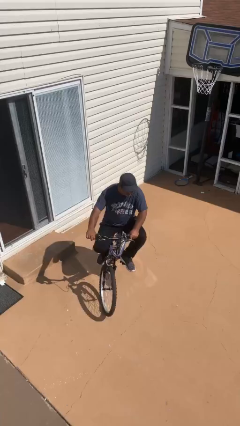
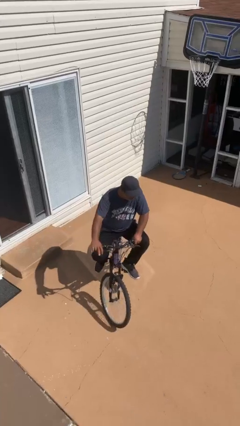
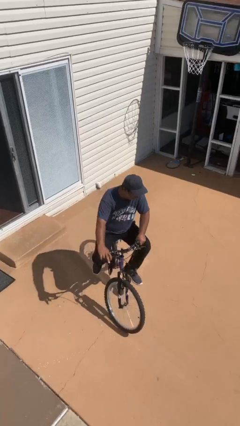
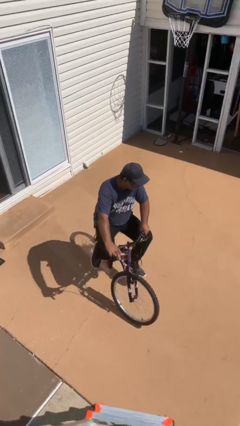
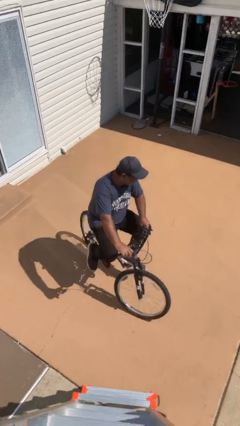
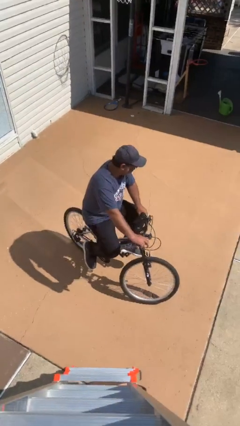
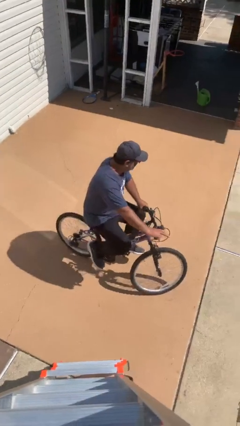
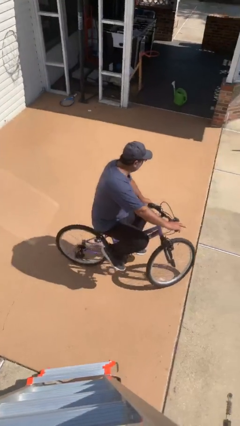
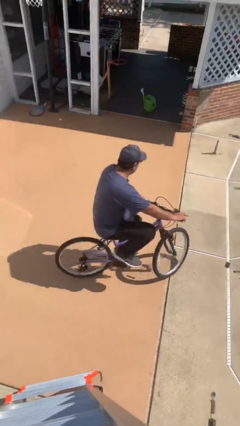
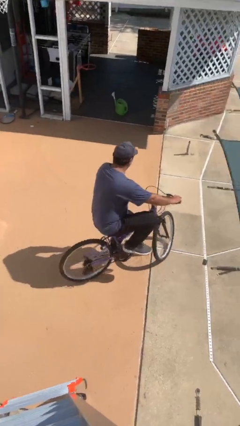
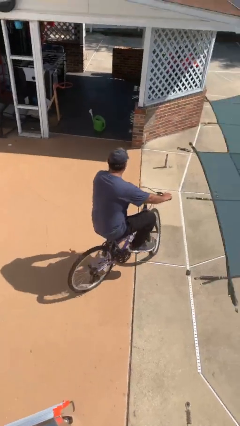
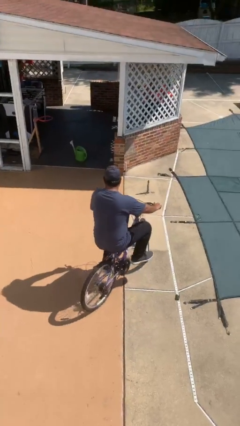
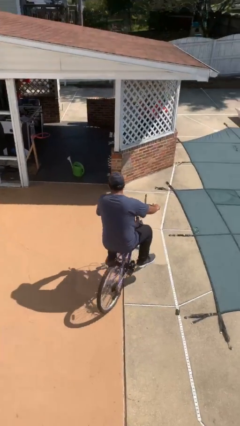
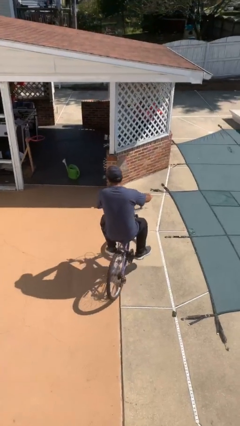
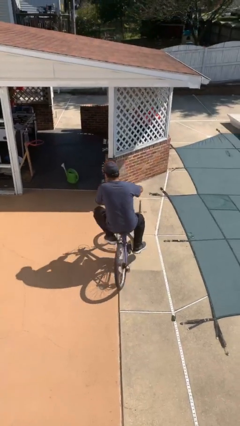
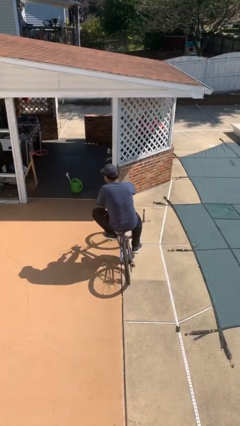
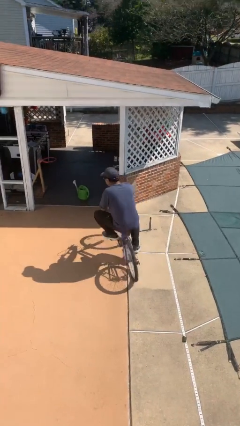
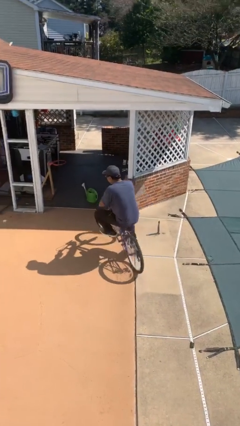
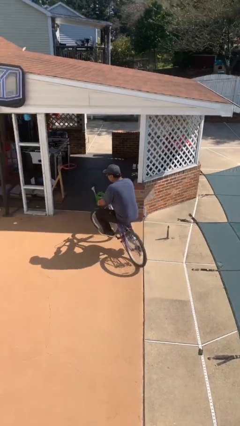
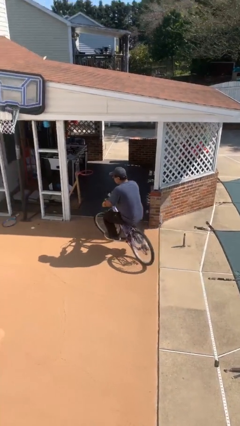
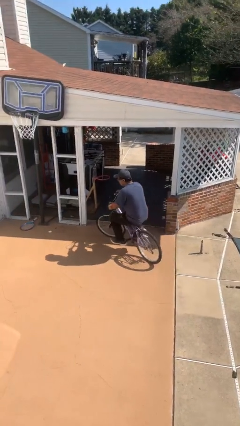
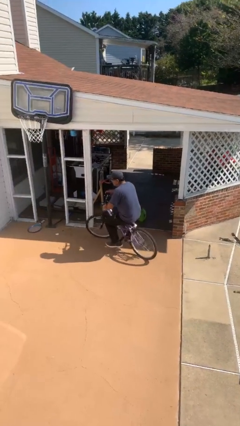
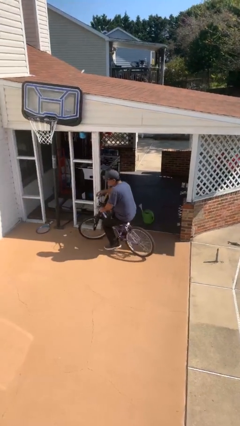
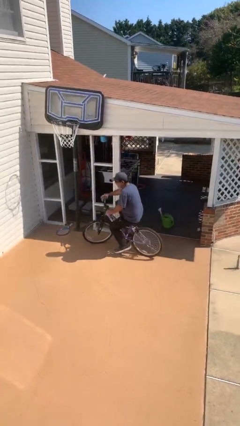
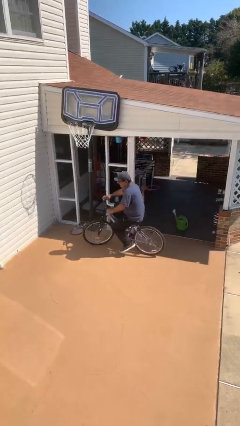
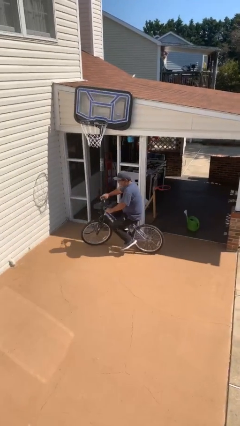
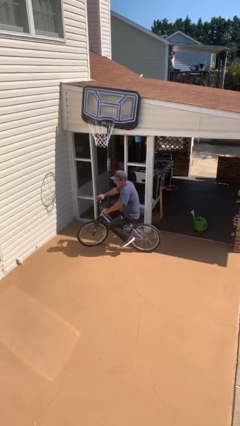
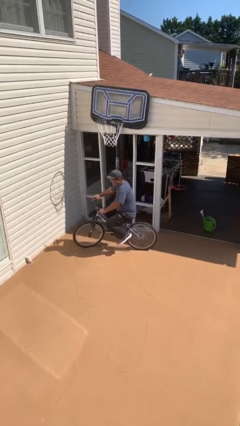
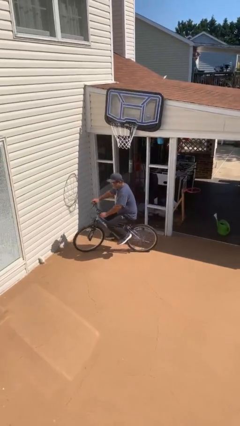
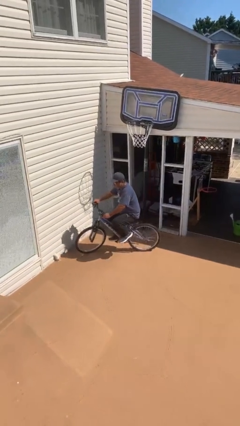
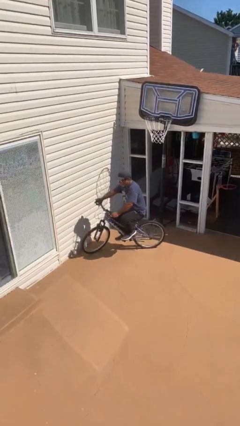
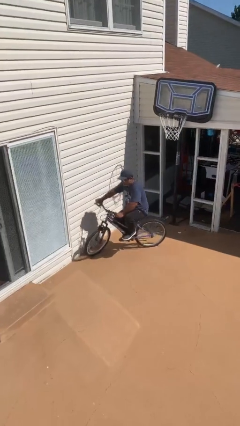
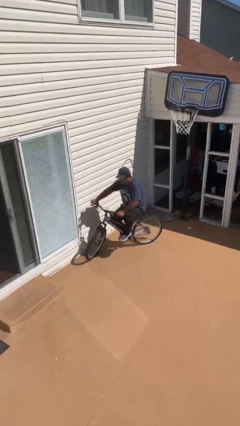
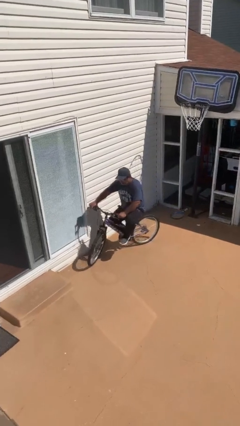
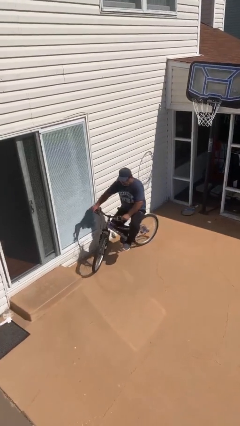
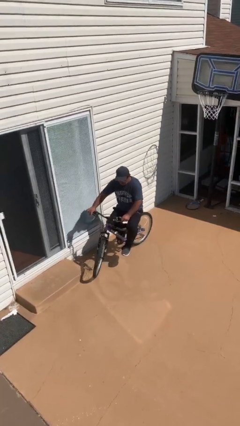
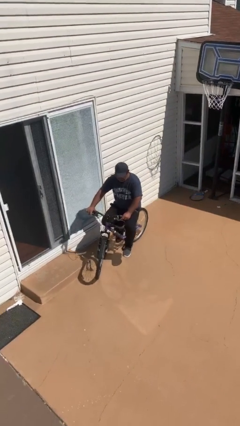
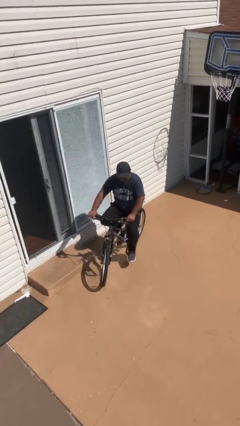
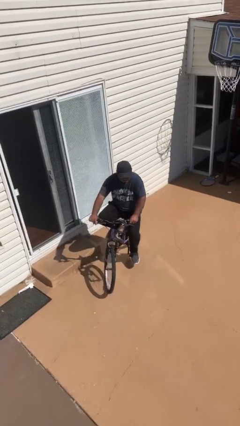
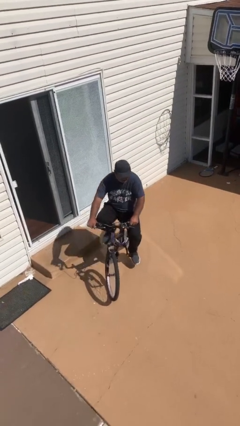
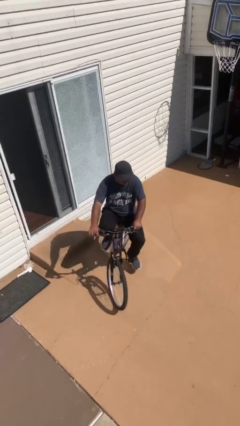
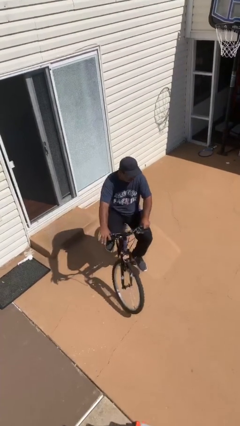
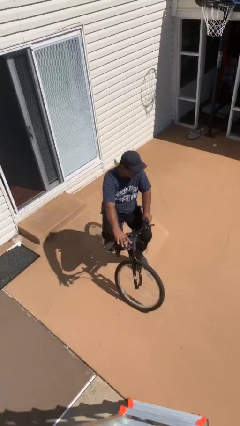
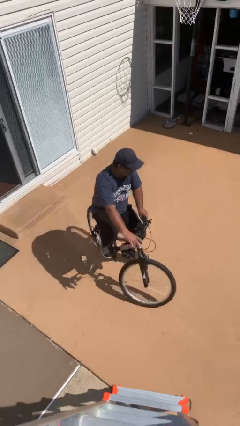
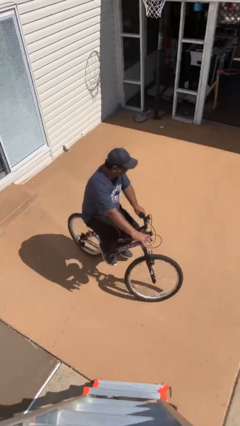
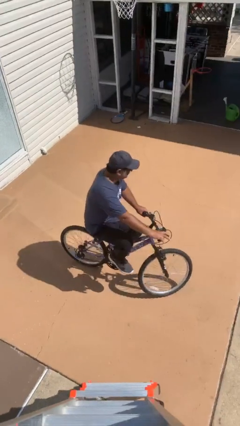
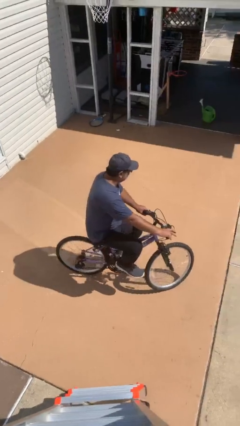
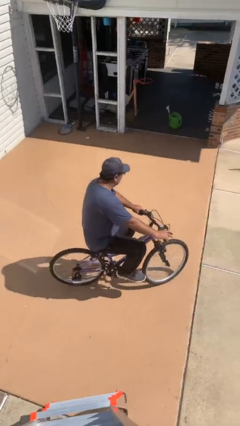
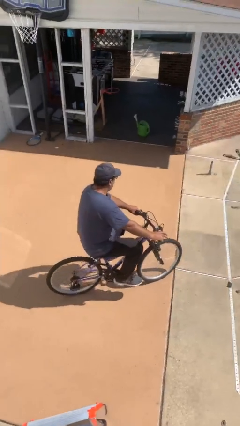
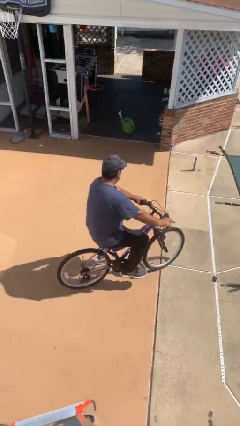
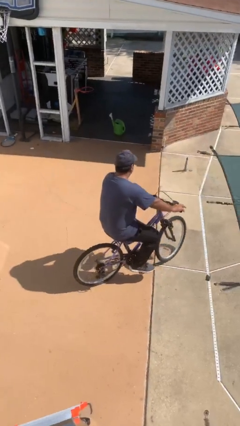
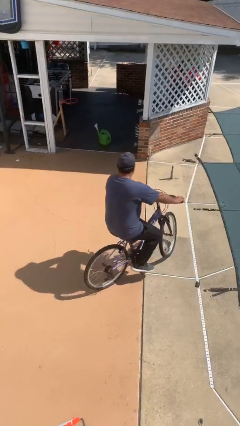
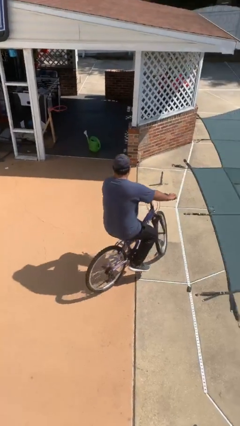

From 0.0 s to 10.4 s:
person rides bicycle

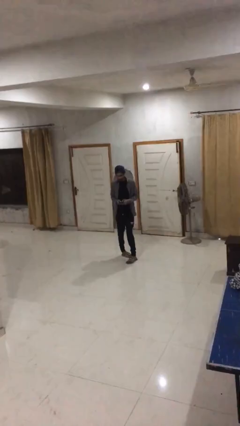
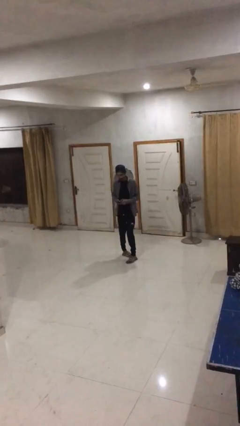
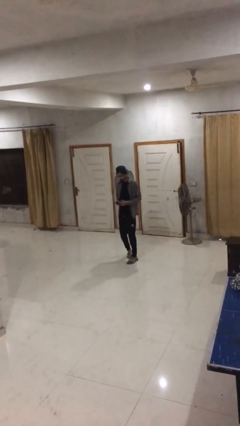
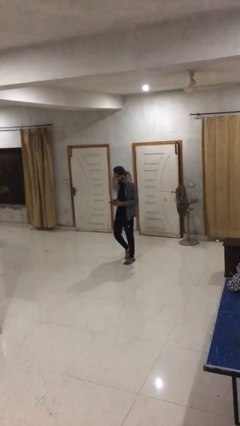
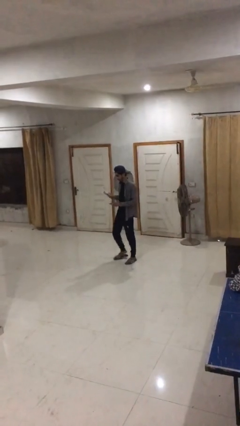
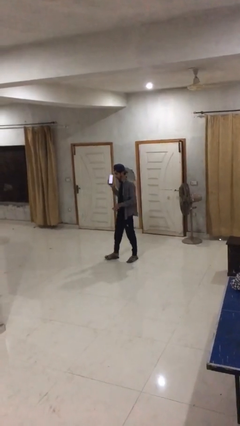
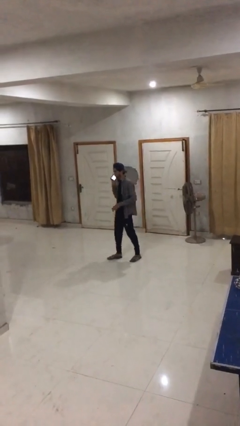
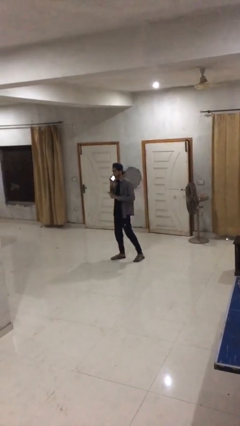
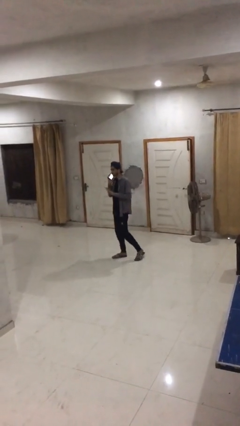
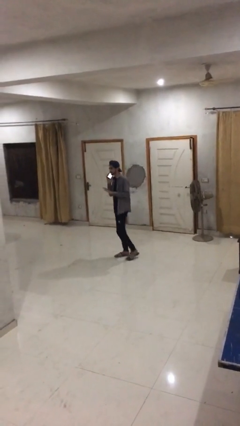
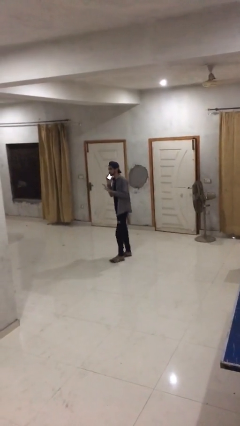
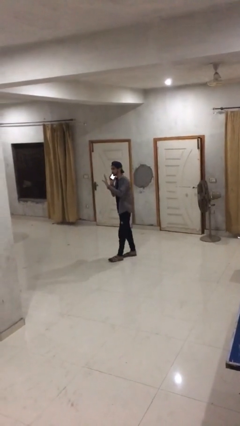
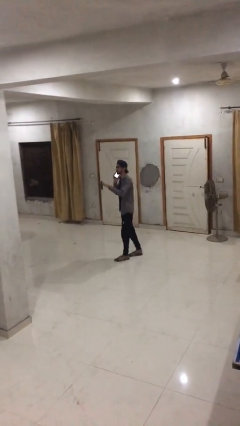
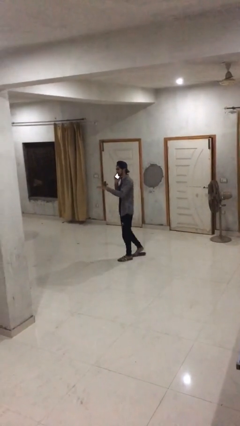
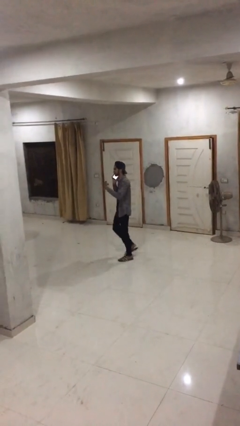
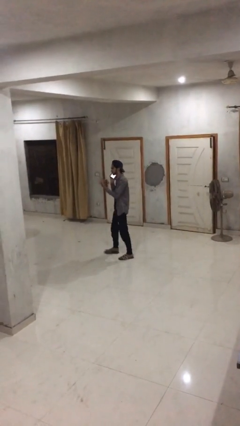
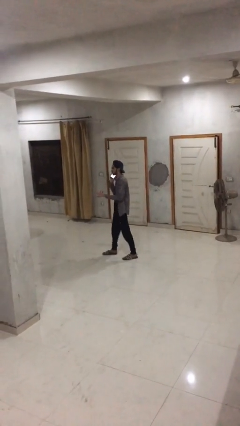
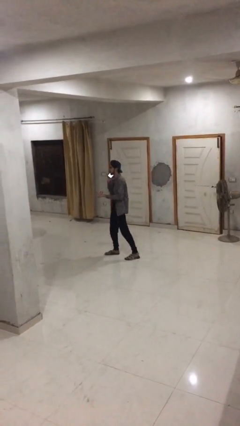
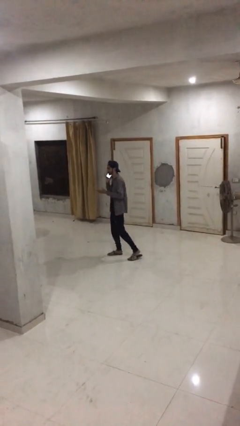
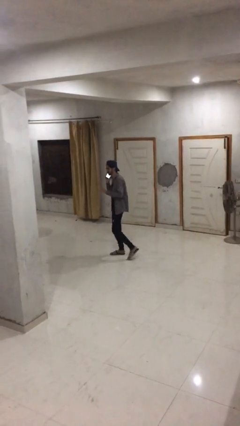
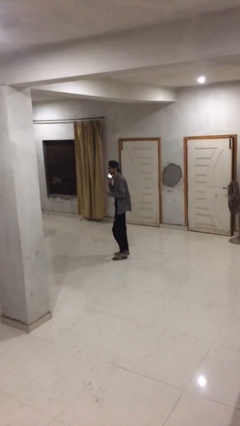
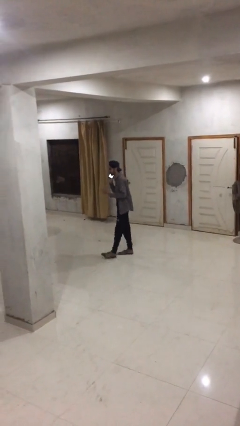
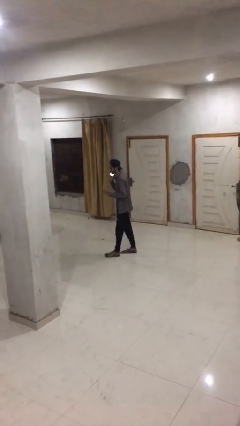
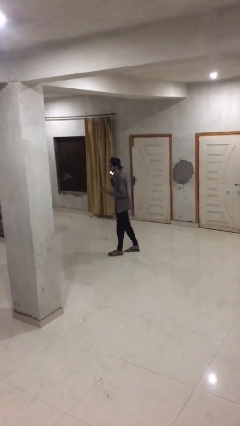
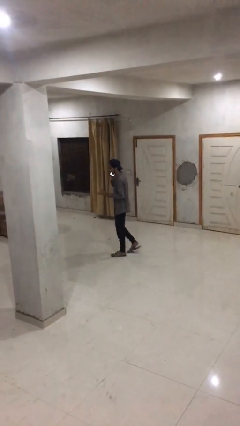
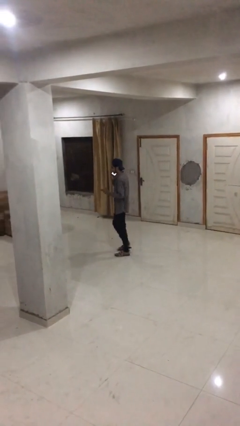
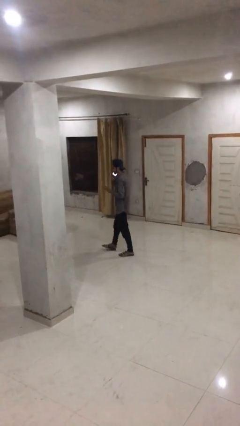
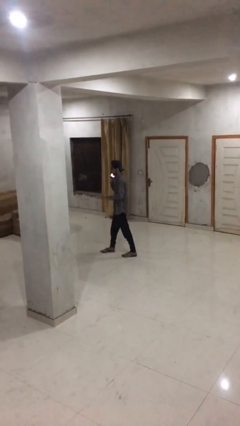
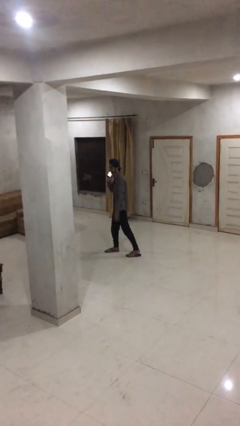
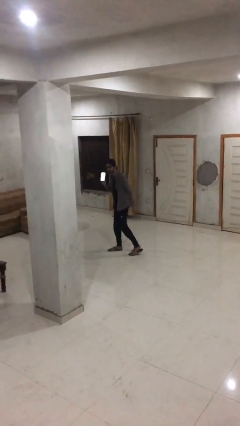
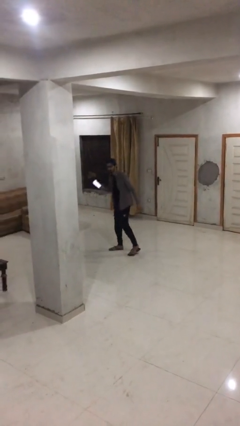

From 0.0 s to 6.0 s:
person talks on phone

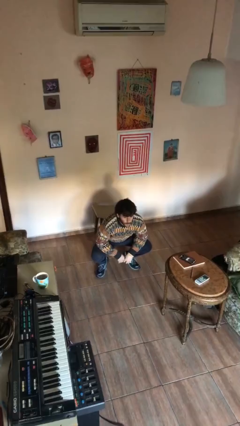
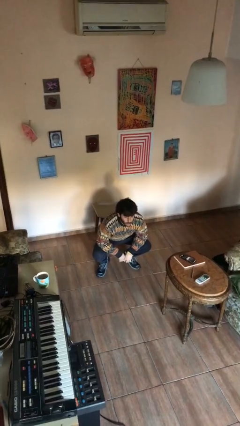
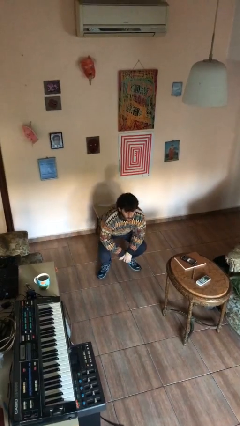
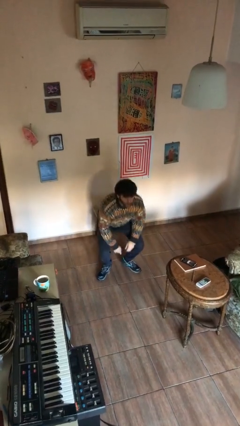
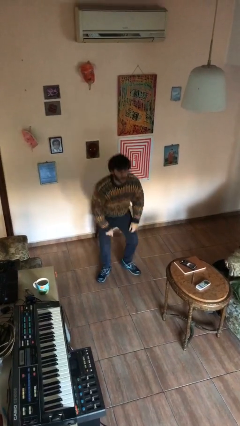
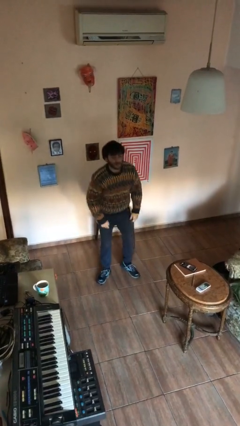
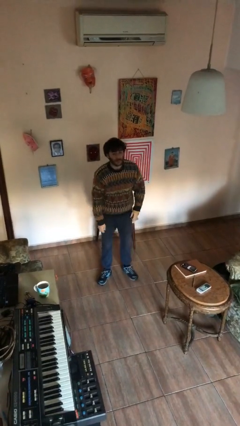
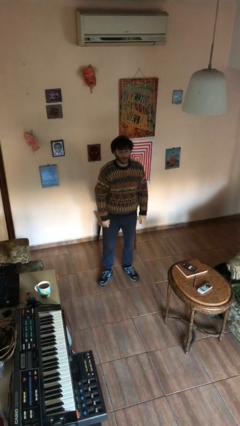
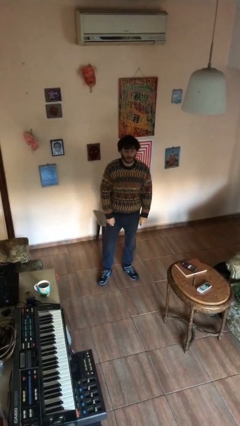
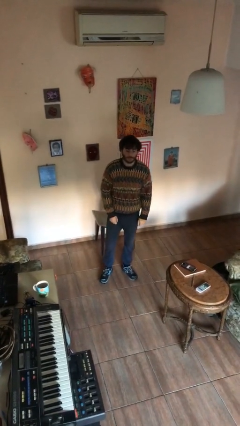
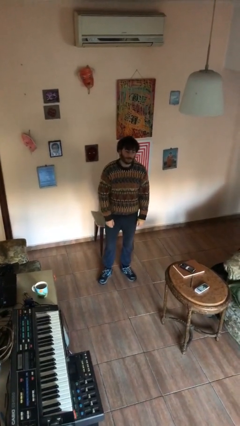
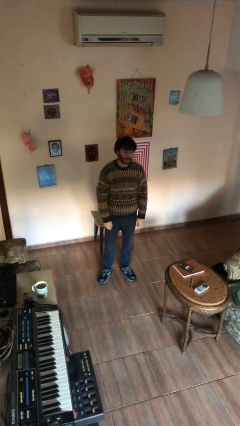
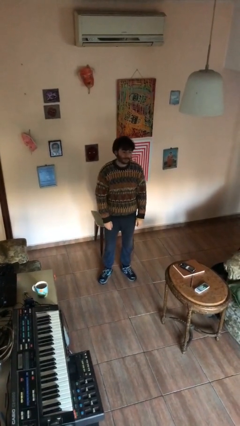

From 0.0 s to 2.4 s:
person stands up
